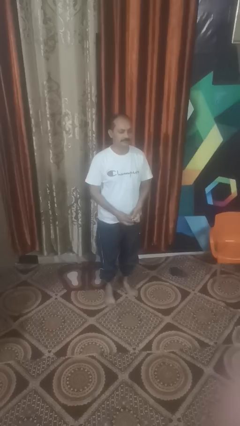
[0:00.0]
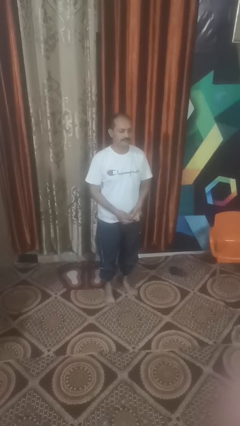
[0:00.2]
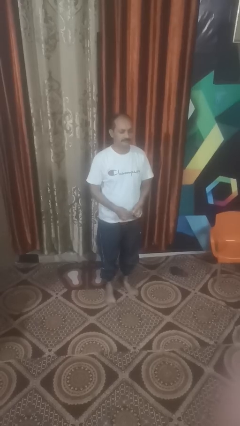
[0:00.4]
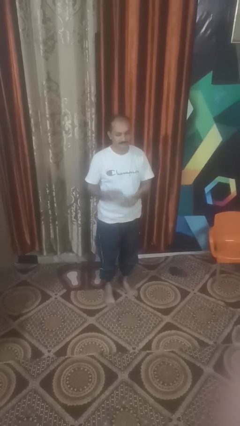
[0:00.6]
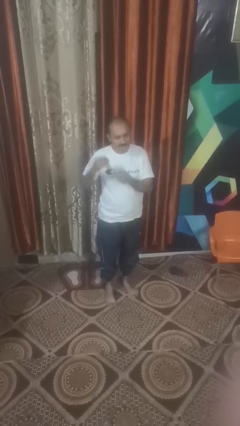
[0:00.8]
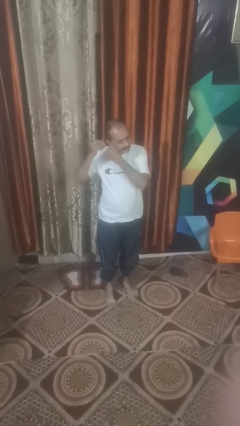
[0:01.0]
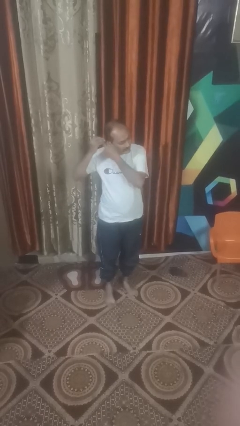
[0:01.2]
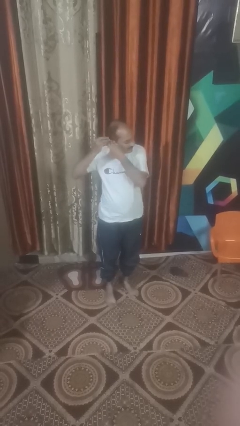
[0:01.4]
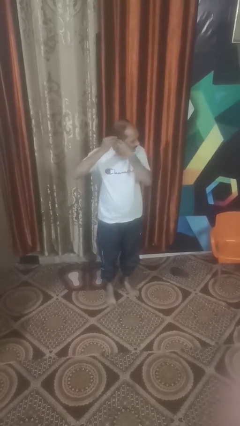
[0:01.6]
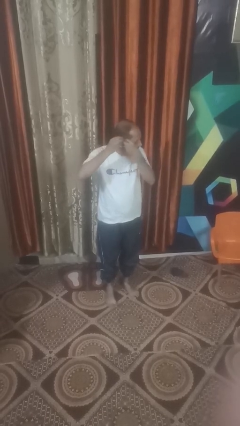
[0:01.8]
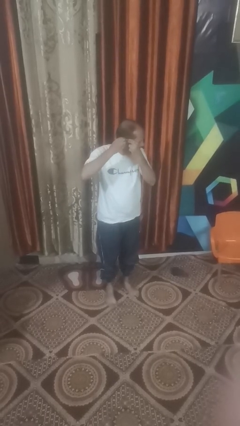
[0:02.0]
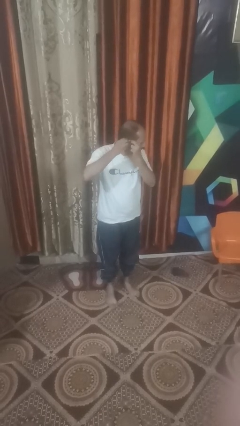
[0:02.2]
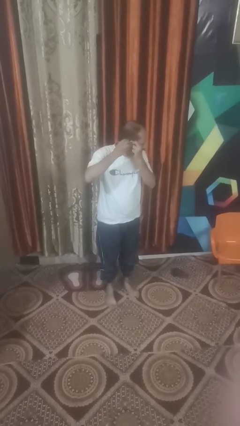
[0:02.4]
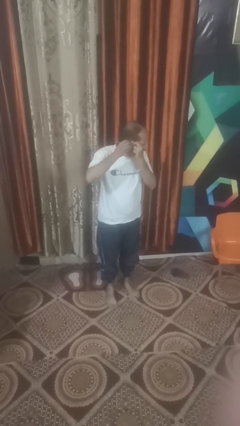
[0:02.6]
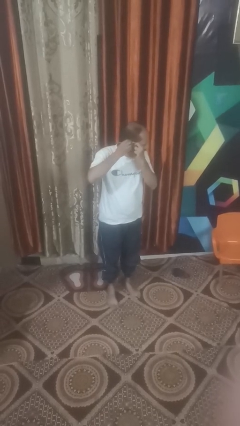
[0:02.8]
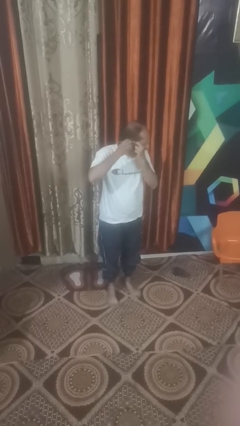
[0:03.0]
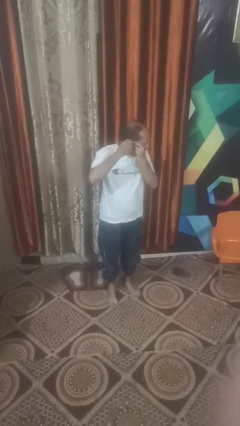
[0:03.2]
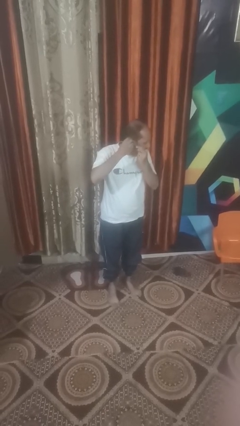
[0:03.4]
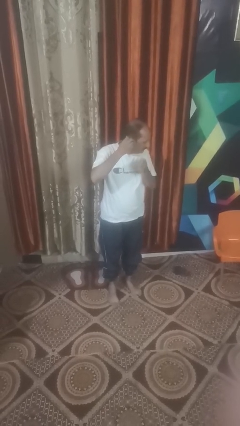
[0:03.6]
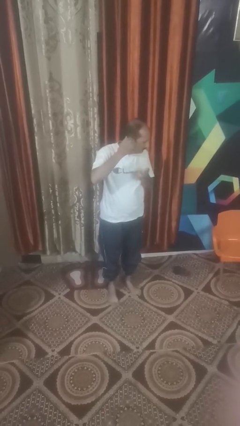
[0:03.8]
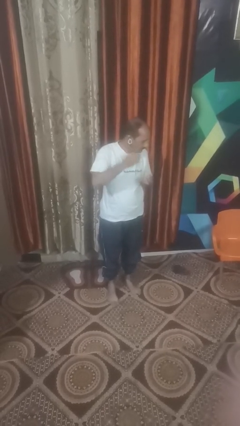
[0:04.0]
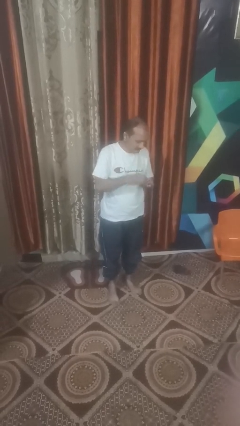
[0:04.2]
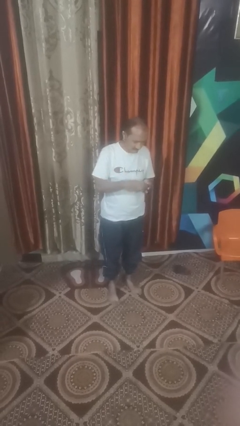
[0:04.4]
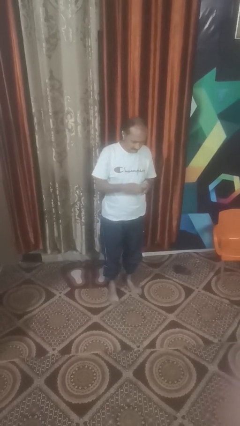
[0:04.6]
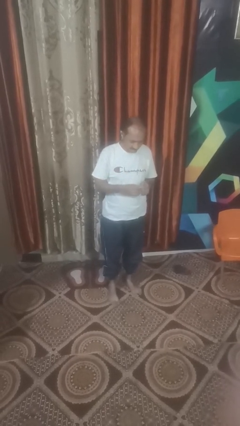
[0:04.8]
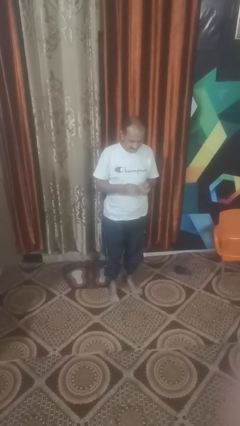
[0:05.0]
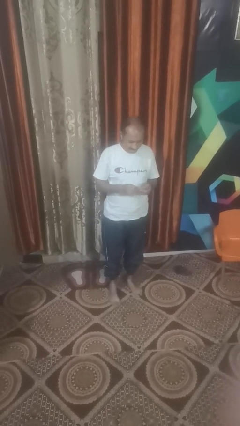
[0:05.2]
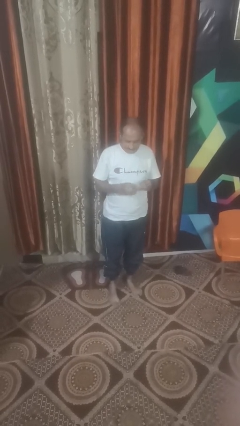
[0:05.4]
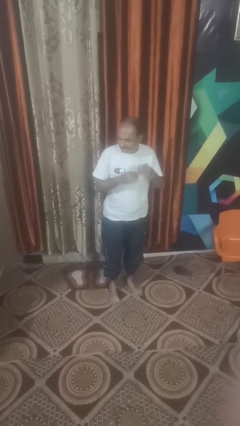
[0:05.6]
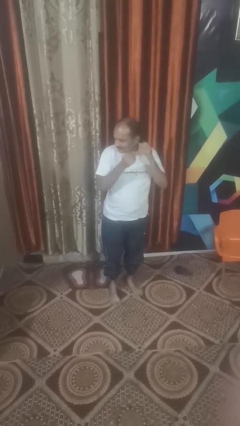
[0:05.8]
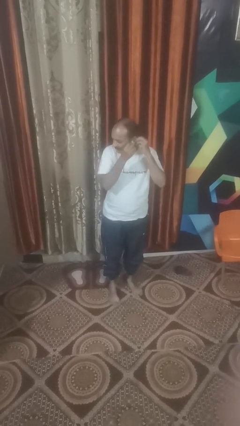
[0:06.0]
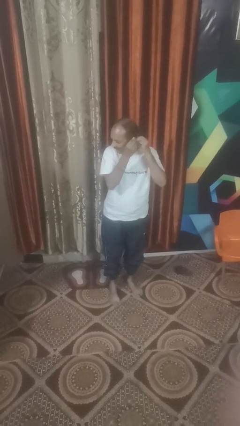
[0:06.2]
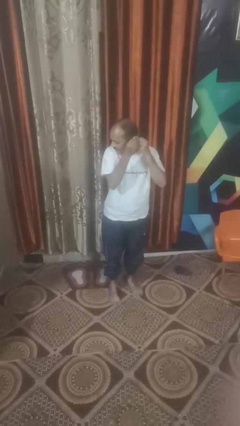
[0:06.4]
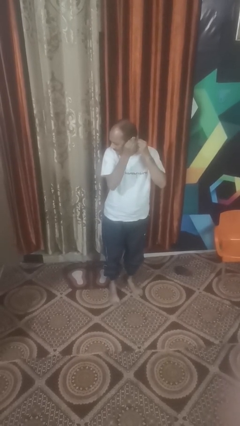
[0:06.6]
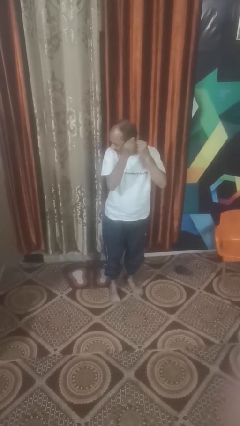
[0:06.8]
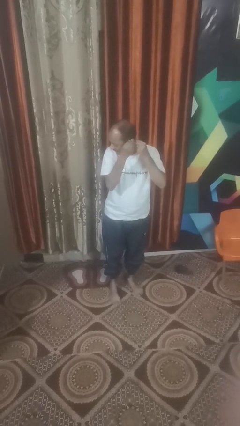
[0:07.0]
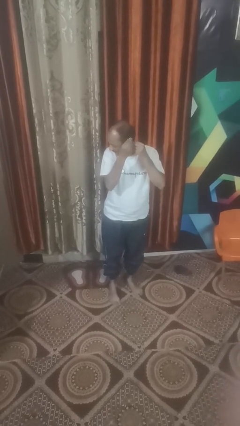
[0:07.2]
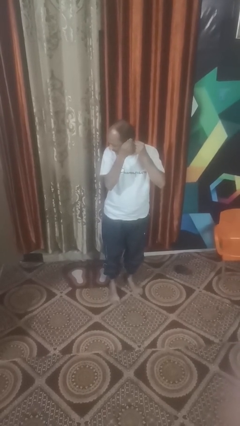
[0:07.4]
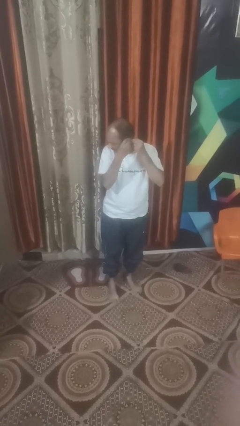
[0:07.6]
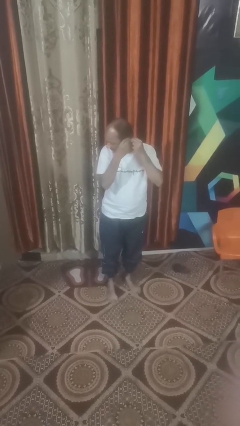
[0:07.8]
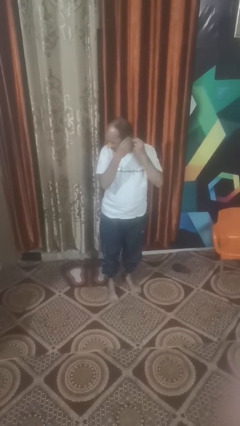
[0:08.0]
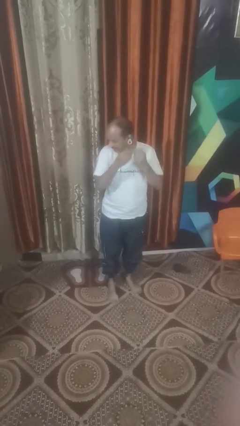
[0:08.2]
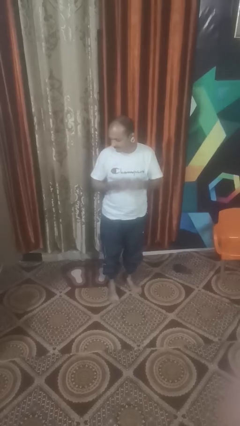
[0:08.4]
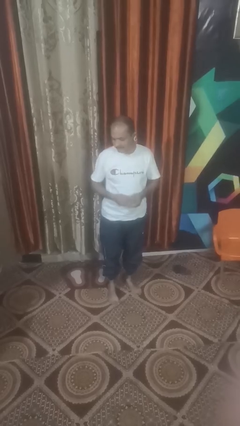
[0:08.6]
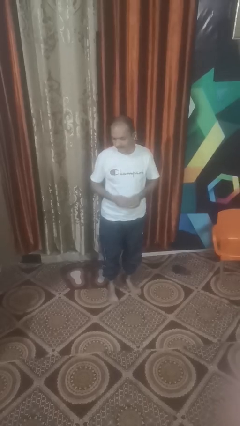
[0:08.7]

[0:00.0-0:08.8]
person puts on earrings

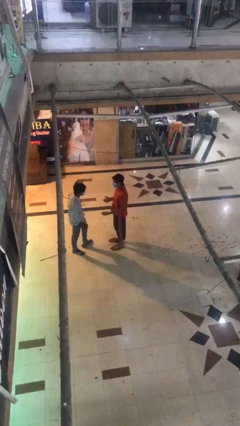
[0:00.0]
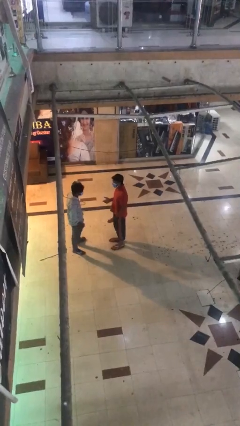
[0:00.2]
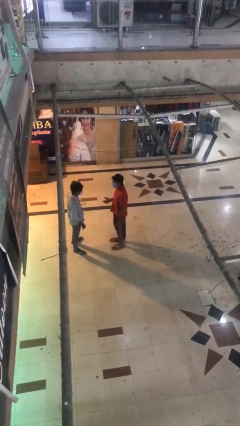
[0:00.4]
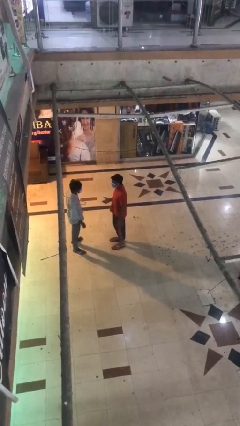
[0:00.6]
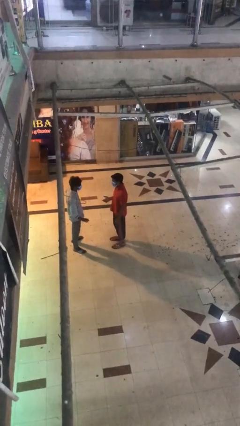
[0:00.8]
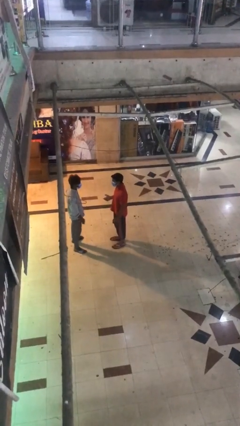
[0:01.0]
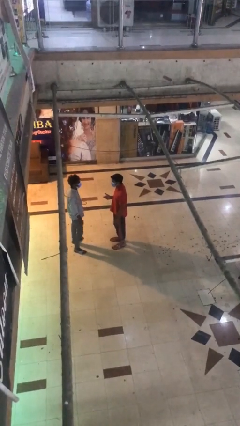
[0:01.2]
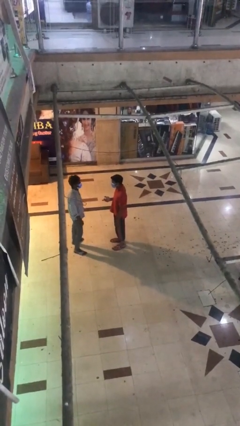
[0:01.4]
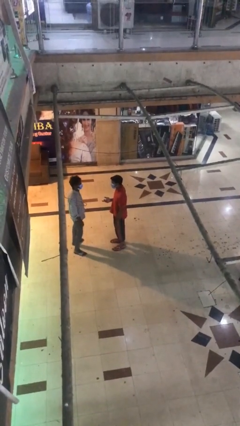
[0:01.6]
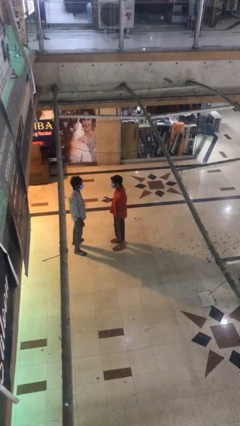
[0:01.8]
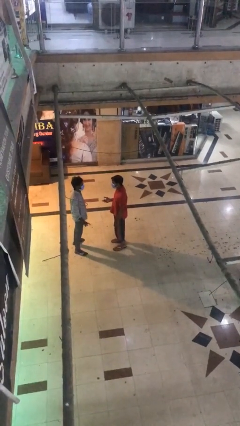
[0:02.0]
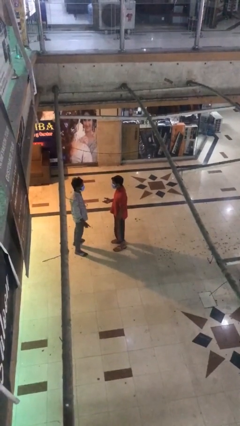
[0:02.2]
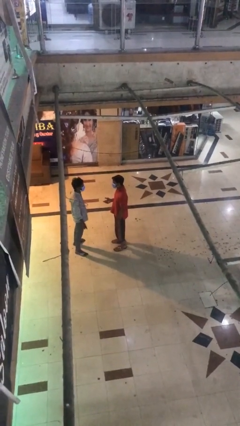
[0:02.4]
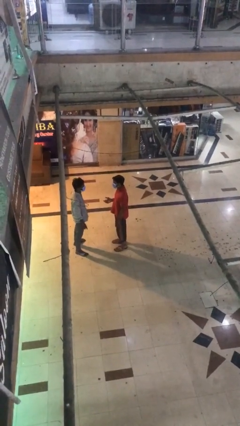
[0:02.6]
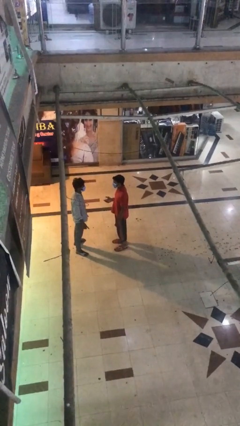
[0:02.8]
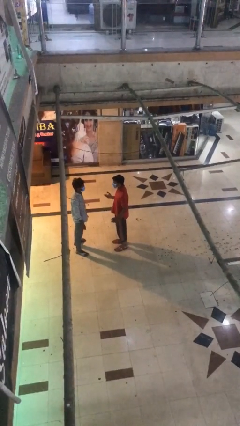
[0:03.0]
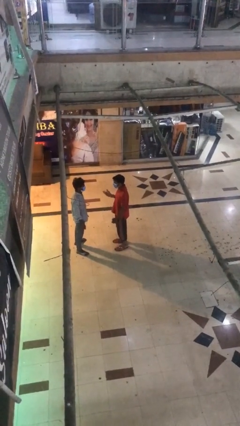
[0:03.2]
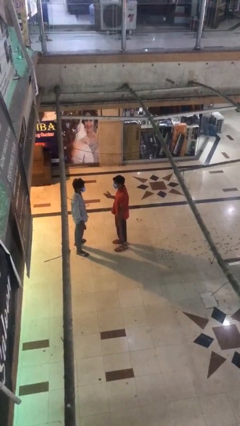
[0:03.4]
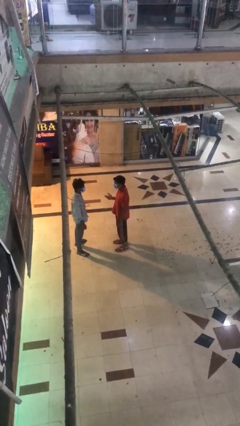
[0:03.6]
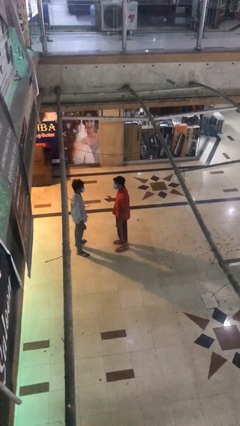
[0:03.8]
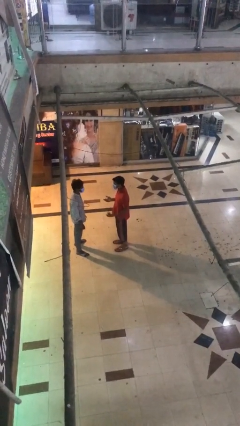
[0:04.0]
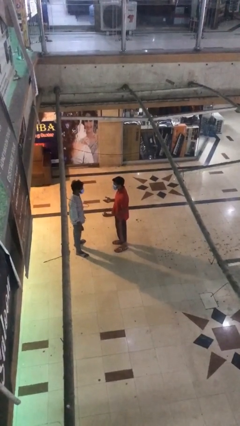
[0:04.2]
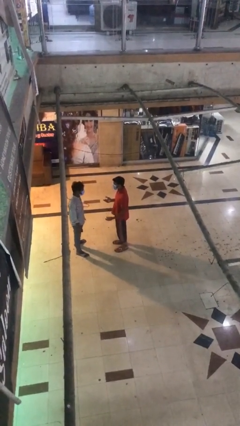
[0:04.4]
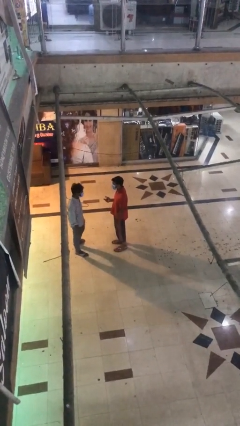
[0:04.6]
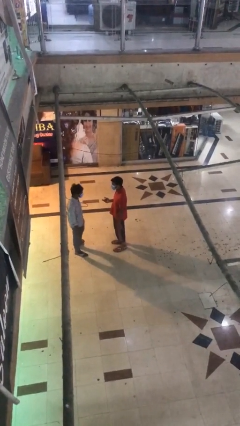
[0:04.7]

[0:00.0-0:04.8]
person talks to person

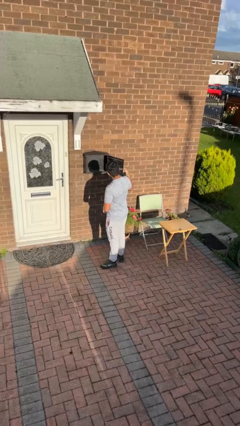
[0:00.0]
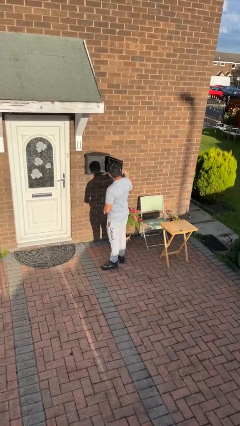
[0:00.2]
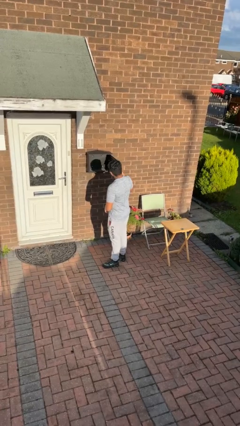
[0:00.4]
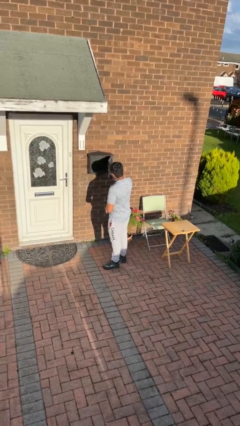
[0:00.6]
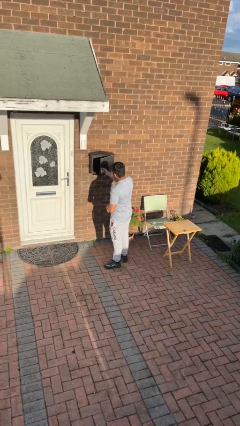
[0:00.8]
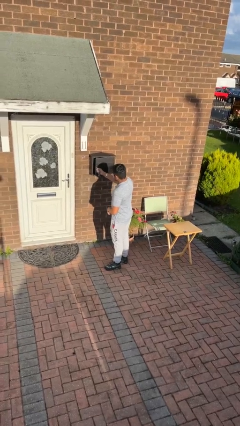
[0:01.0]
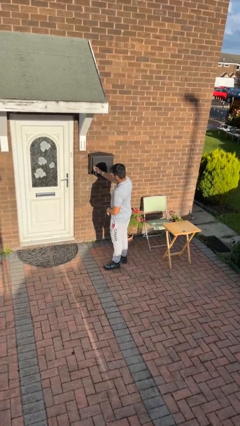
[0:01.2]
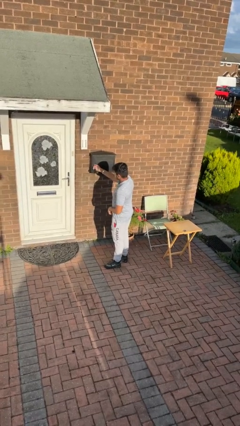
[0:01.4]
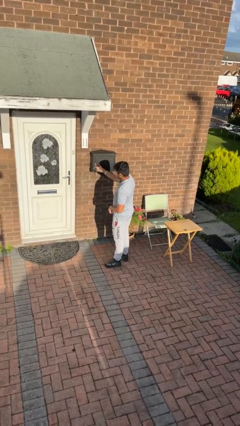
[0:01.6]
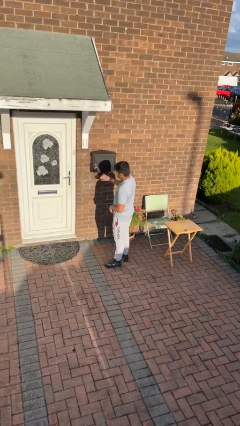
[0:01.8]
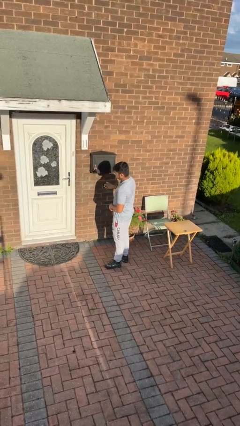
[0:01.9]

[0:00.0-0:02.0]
person closes mailbox

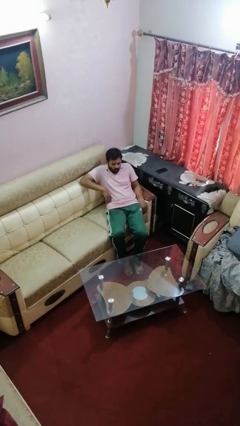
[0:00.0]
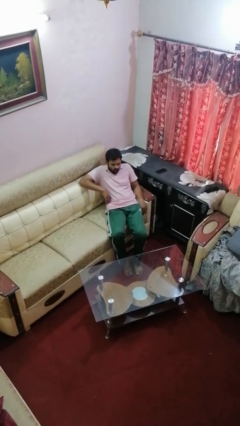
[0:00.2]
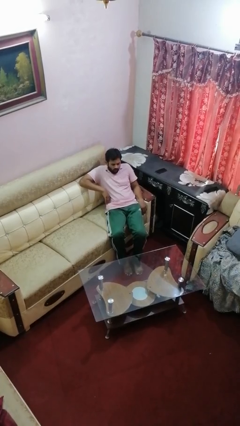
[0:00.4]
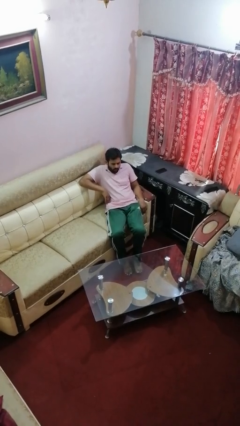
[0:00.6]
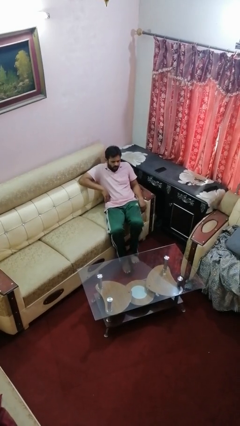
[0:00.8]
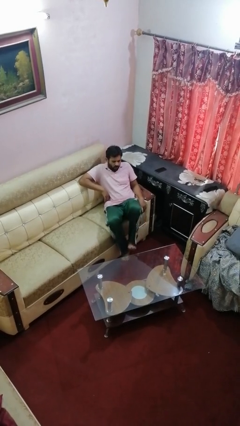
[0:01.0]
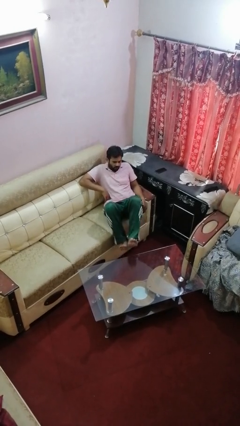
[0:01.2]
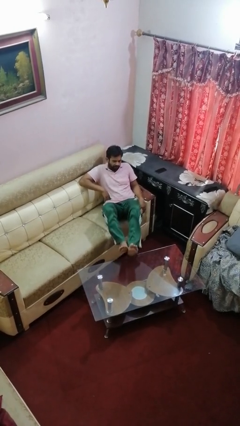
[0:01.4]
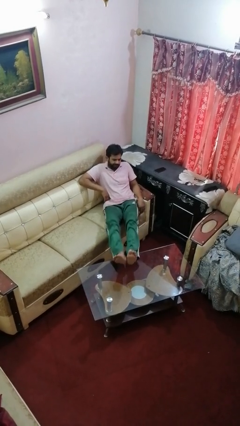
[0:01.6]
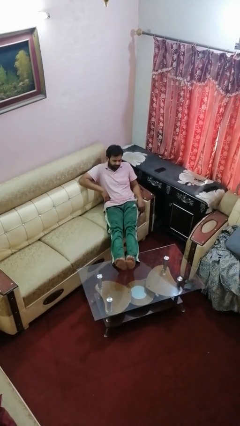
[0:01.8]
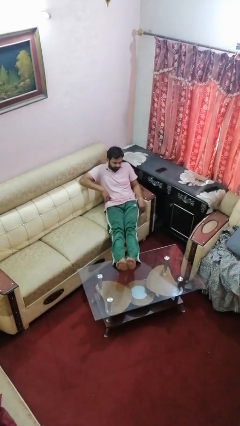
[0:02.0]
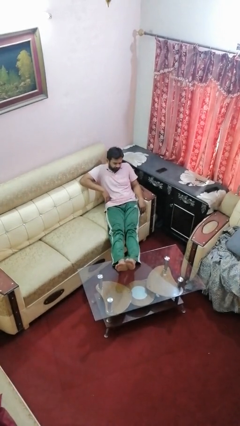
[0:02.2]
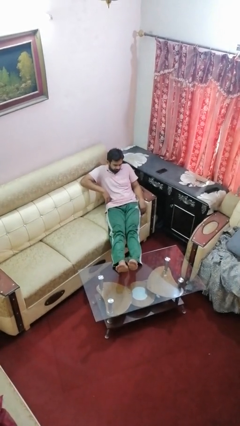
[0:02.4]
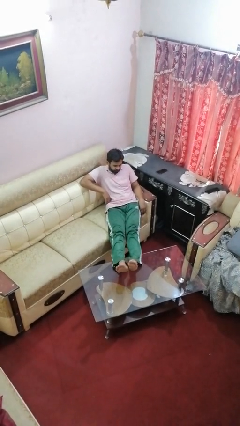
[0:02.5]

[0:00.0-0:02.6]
person puts feet up
